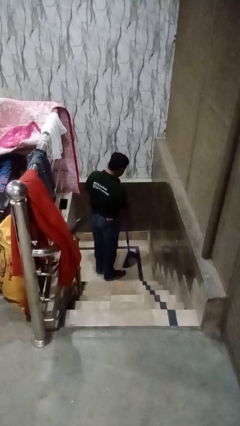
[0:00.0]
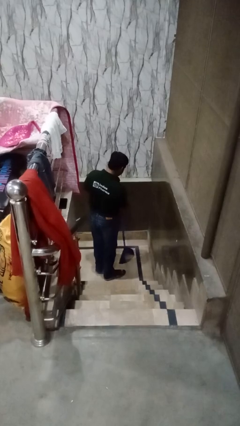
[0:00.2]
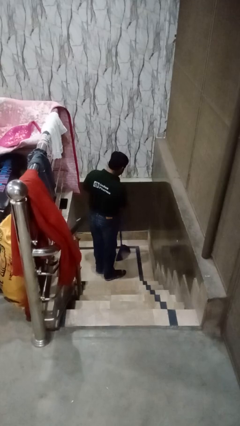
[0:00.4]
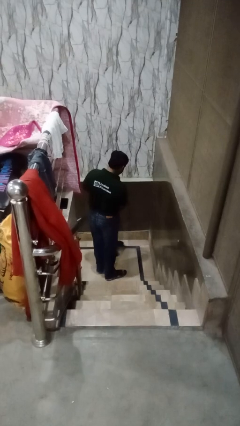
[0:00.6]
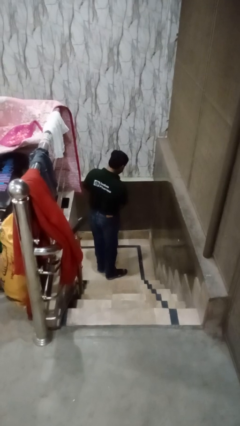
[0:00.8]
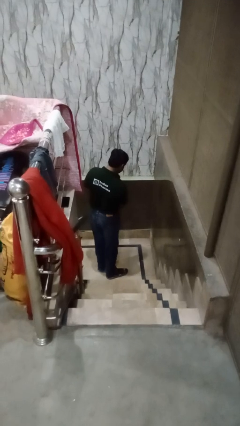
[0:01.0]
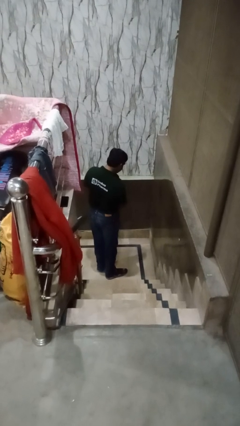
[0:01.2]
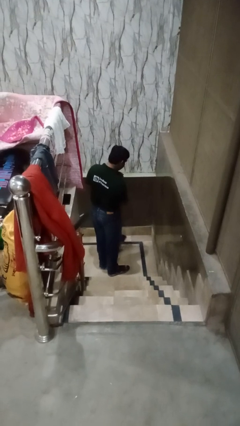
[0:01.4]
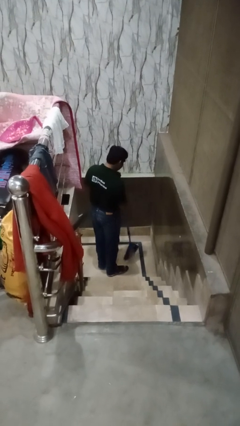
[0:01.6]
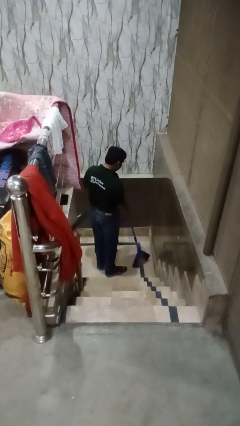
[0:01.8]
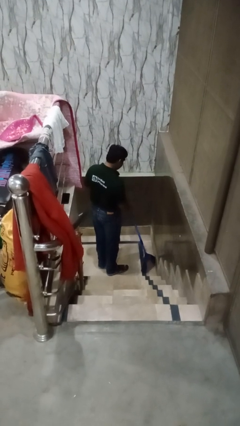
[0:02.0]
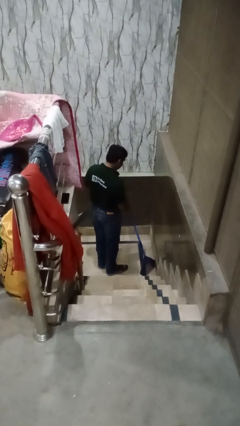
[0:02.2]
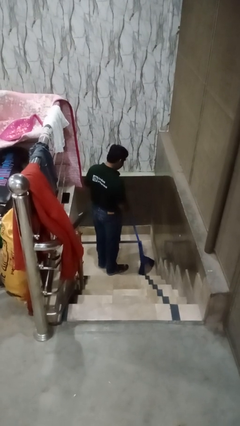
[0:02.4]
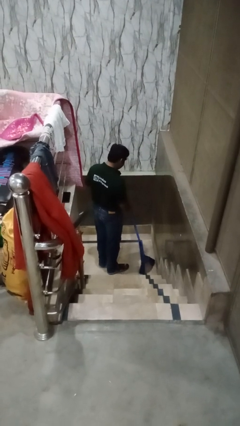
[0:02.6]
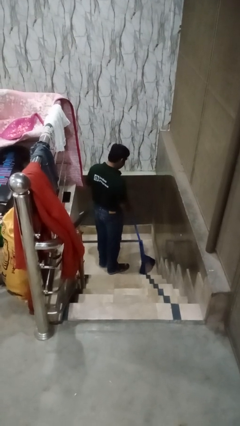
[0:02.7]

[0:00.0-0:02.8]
person sweeps floor

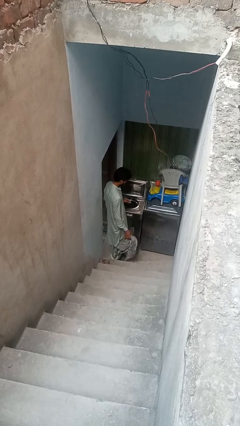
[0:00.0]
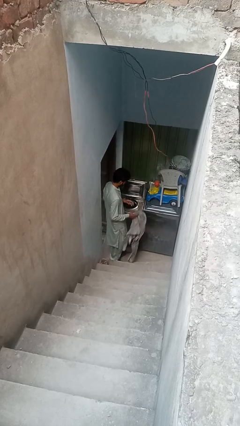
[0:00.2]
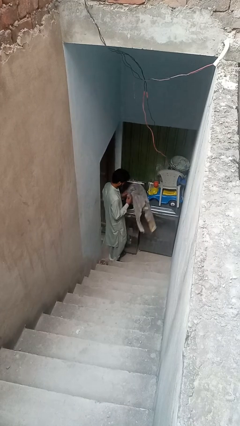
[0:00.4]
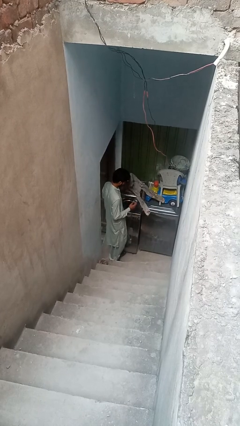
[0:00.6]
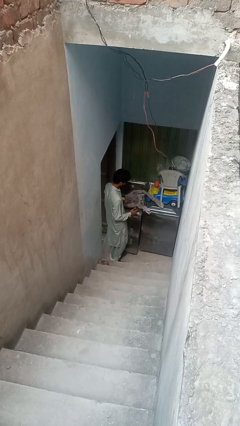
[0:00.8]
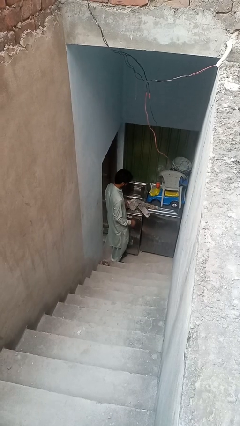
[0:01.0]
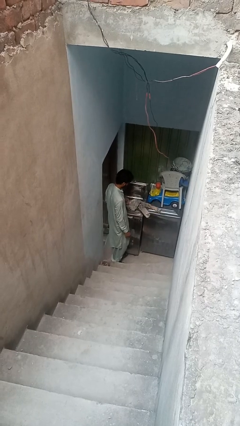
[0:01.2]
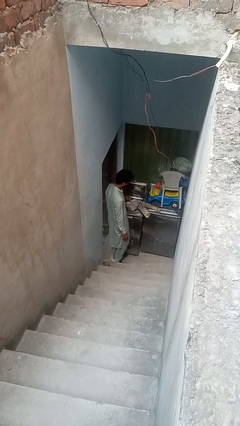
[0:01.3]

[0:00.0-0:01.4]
person loads clotheswasher

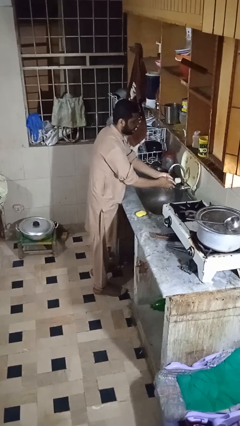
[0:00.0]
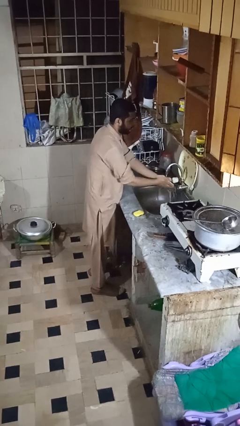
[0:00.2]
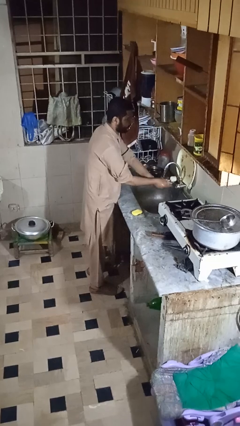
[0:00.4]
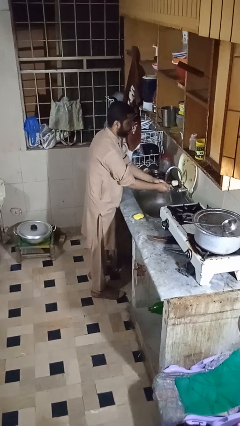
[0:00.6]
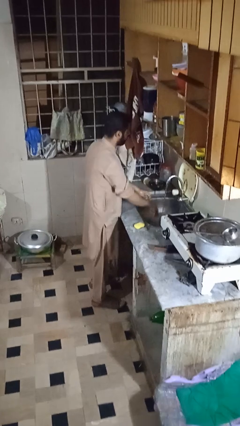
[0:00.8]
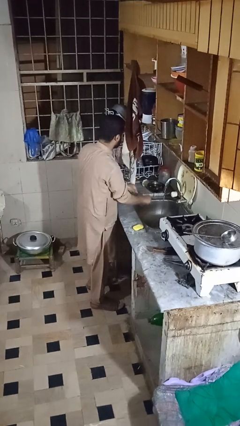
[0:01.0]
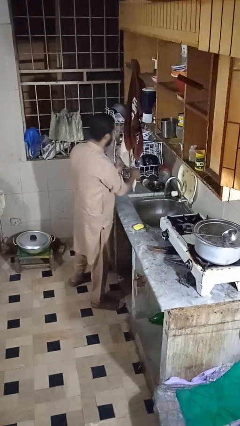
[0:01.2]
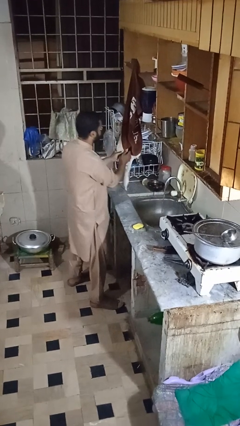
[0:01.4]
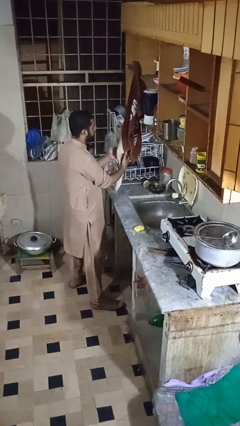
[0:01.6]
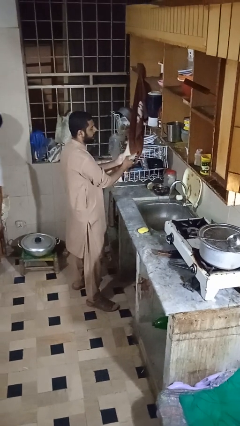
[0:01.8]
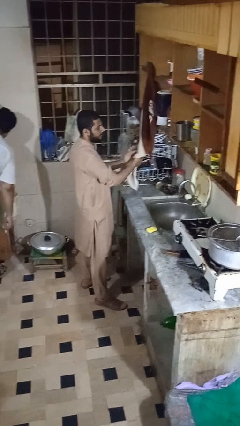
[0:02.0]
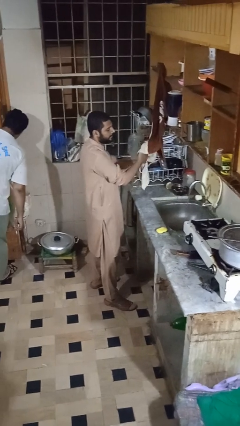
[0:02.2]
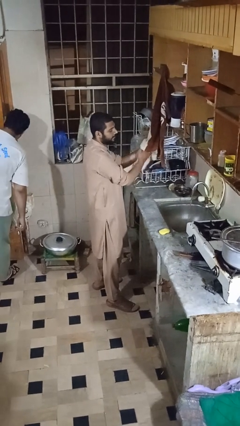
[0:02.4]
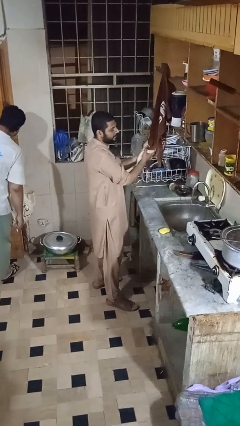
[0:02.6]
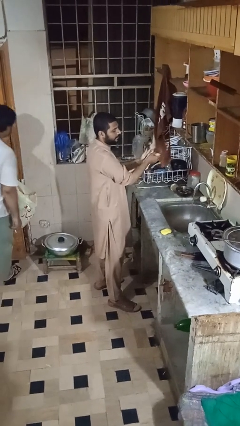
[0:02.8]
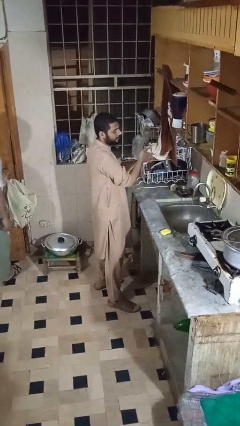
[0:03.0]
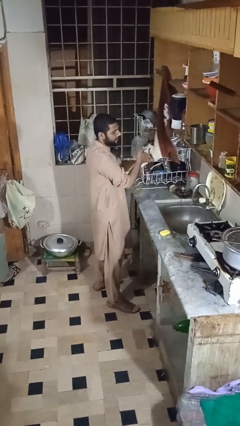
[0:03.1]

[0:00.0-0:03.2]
person dries hands with towel

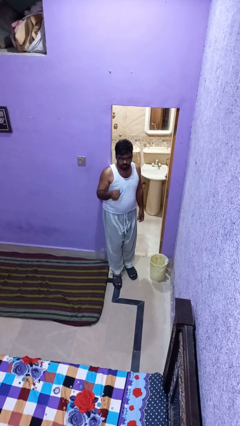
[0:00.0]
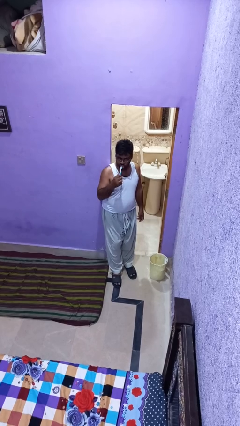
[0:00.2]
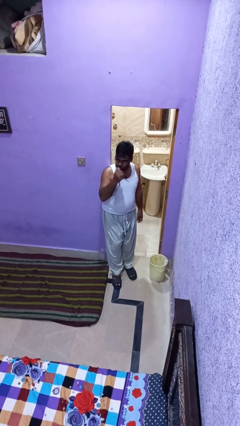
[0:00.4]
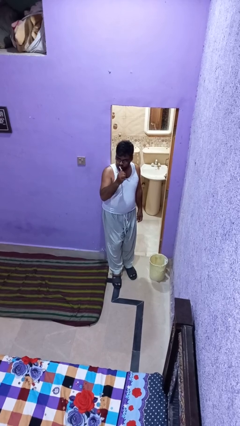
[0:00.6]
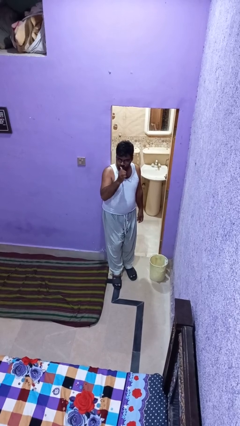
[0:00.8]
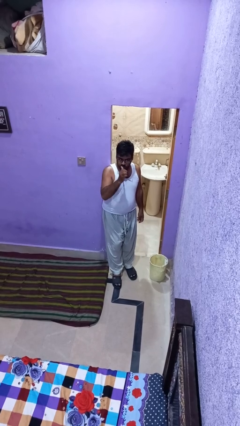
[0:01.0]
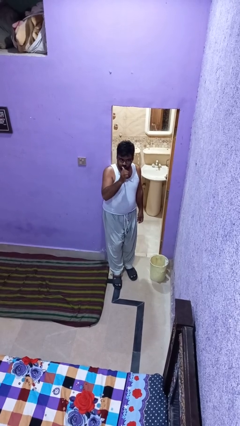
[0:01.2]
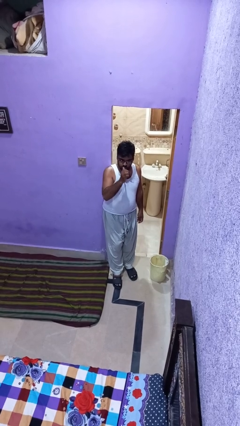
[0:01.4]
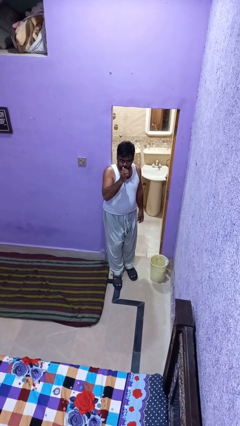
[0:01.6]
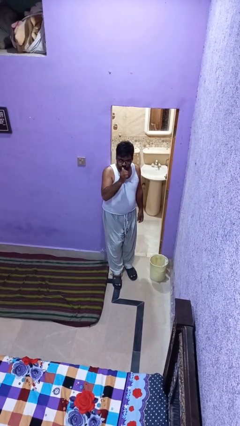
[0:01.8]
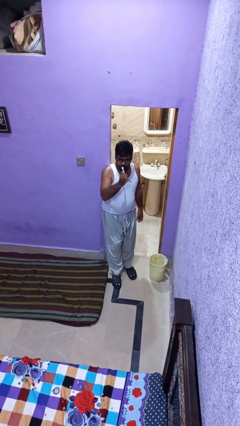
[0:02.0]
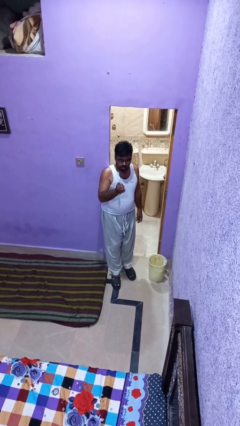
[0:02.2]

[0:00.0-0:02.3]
person brushes teeth

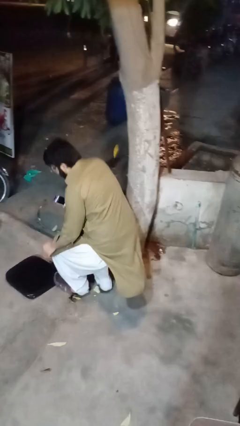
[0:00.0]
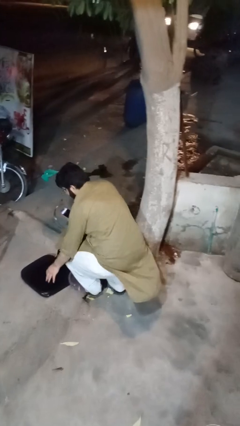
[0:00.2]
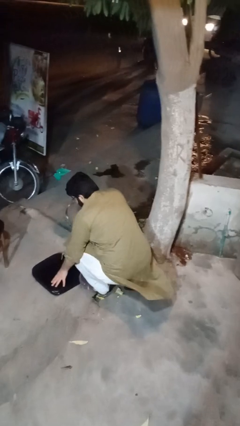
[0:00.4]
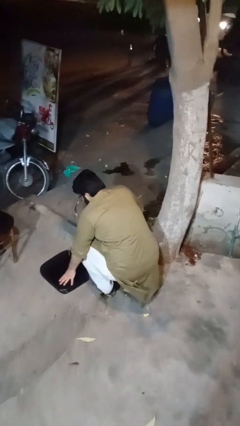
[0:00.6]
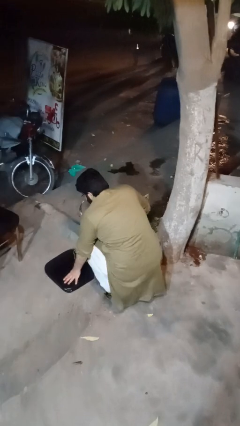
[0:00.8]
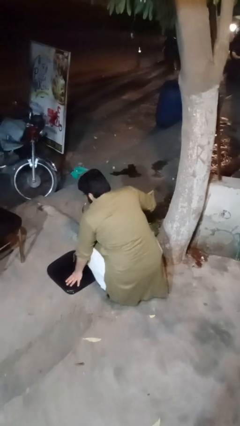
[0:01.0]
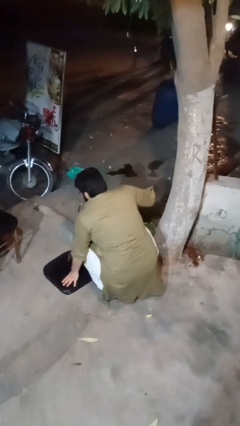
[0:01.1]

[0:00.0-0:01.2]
person trips on object on floor

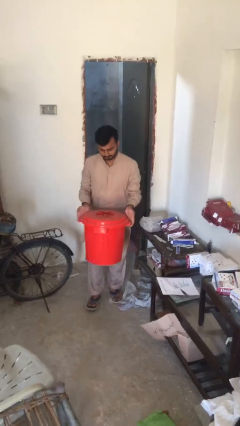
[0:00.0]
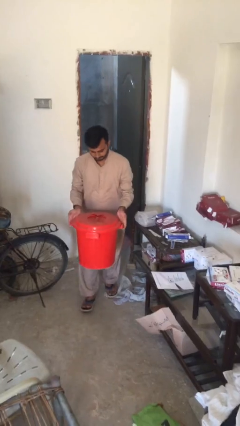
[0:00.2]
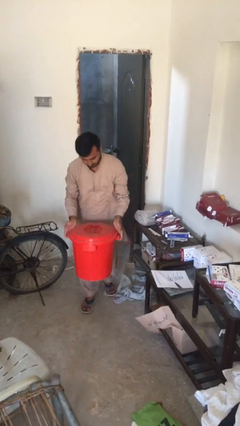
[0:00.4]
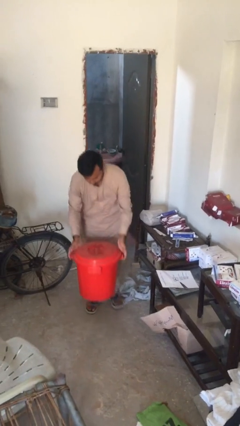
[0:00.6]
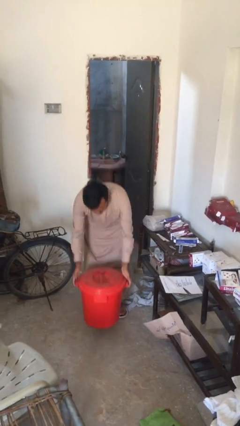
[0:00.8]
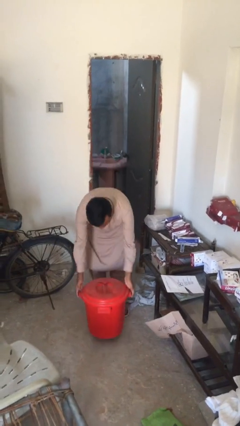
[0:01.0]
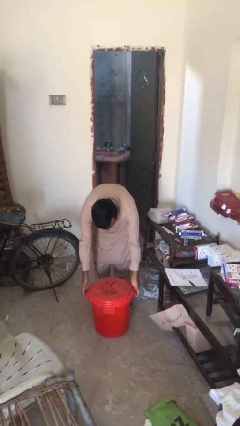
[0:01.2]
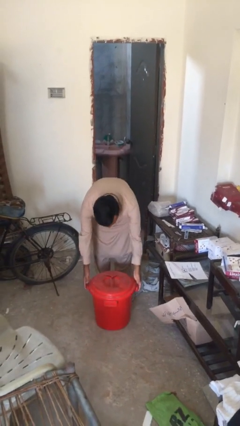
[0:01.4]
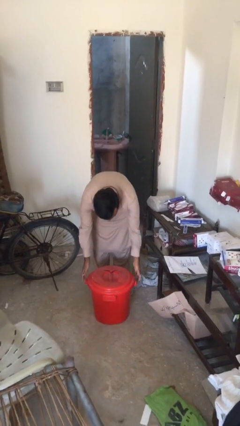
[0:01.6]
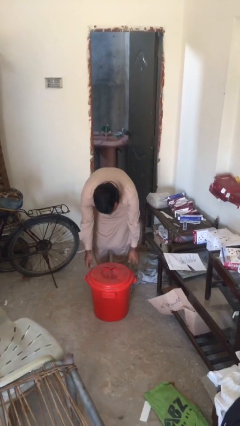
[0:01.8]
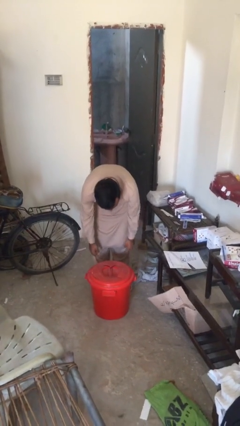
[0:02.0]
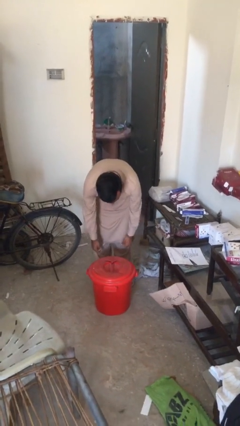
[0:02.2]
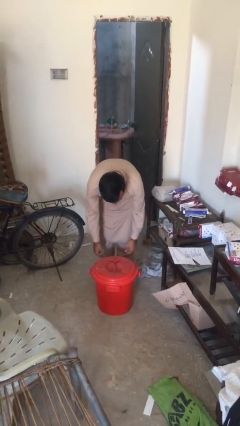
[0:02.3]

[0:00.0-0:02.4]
person puts down object on floor

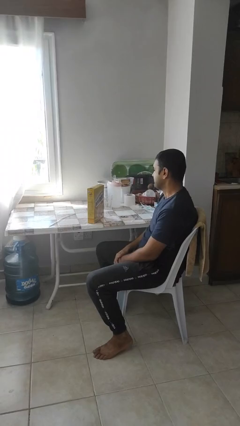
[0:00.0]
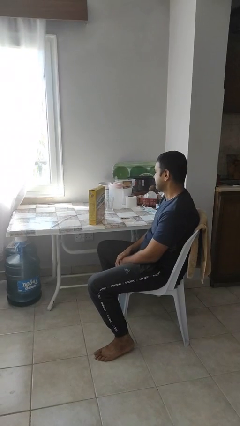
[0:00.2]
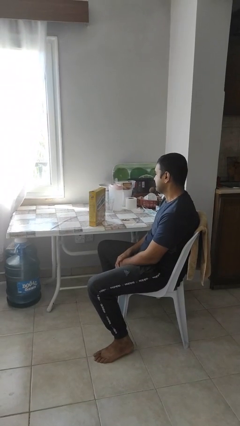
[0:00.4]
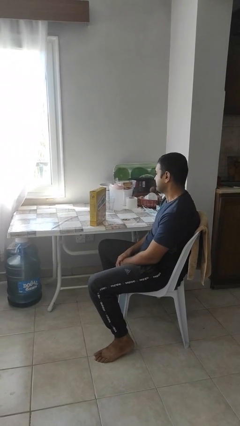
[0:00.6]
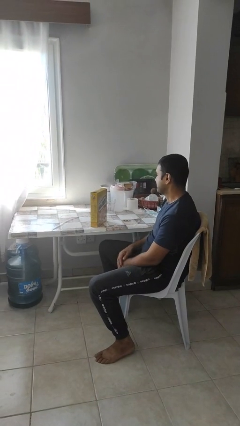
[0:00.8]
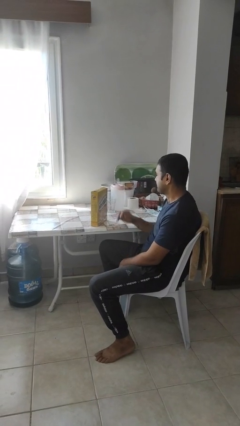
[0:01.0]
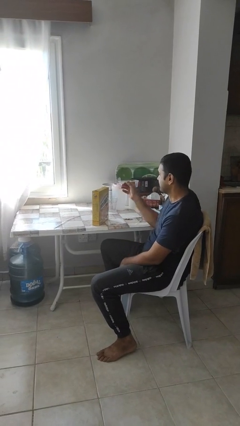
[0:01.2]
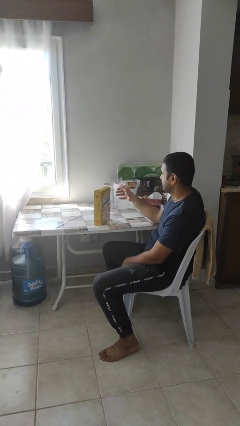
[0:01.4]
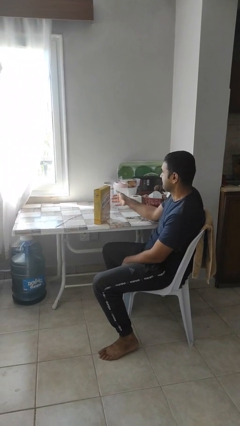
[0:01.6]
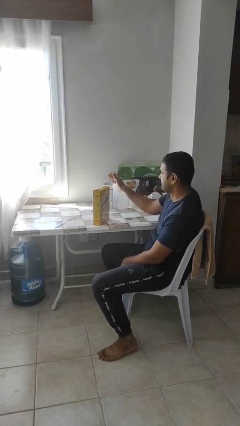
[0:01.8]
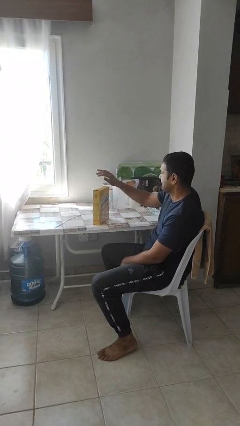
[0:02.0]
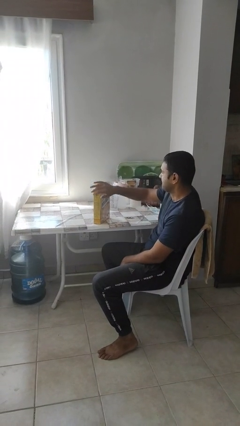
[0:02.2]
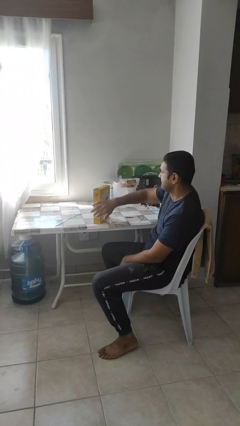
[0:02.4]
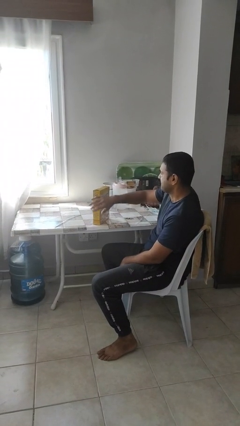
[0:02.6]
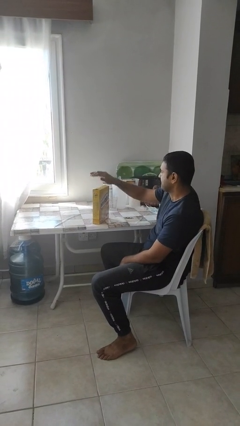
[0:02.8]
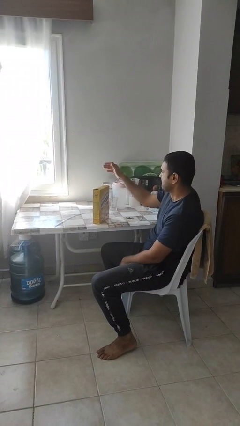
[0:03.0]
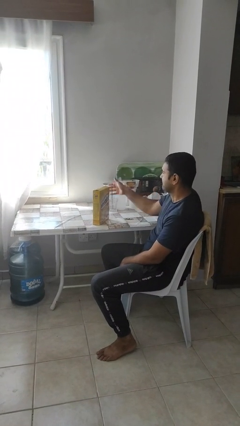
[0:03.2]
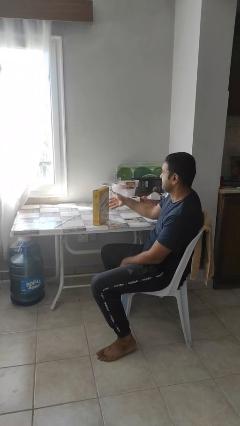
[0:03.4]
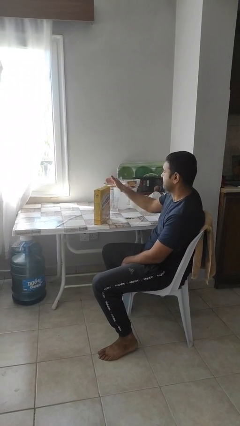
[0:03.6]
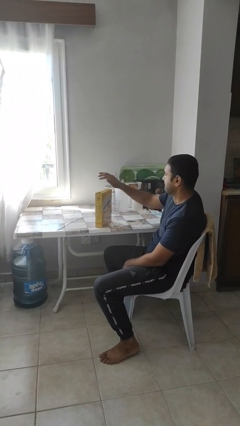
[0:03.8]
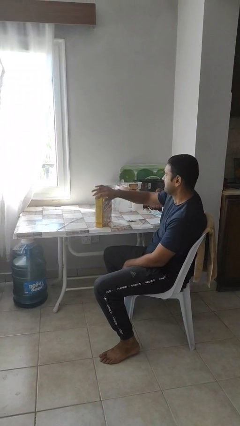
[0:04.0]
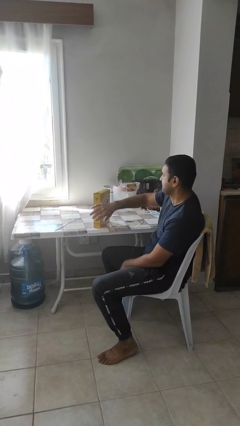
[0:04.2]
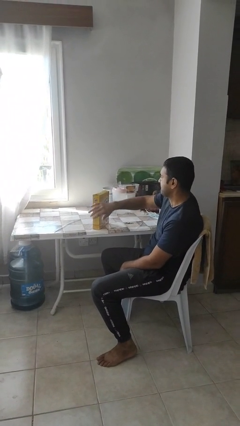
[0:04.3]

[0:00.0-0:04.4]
person waves hand over object
